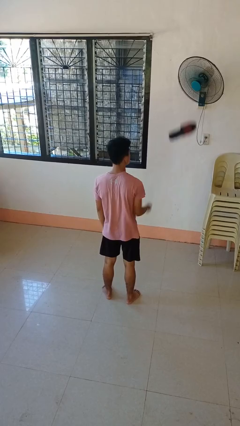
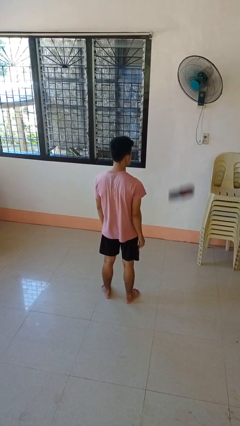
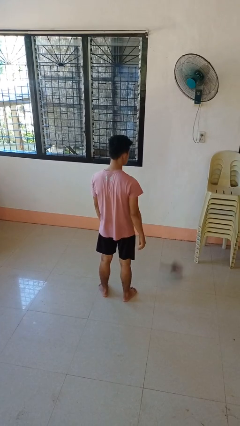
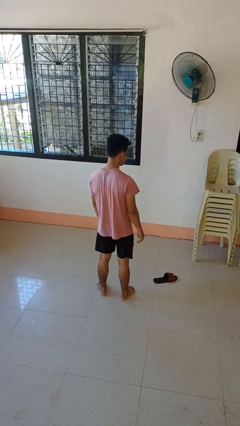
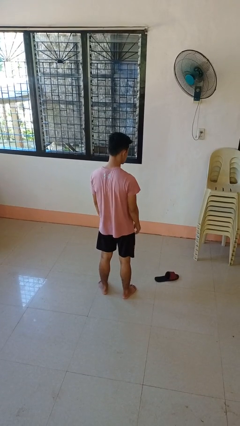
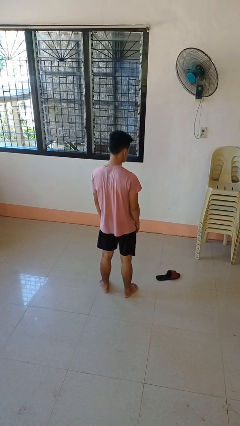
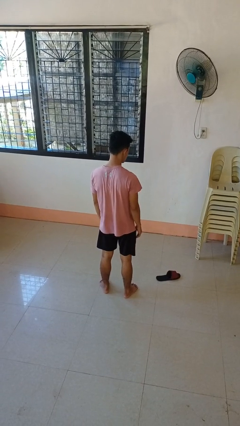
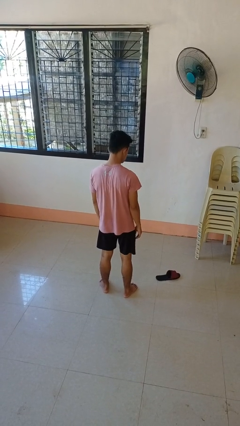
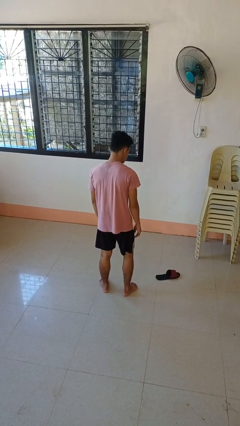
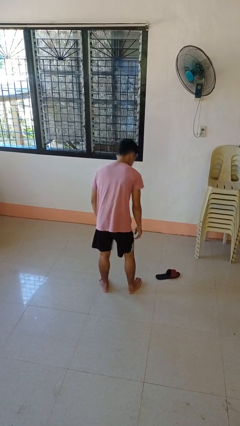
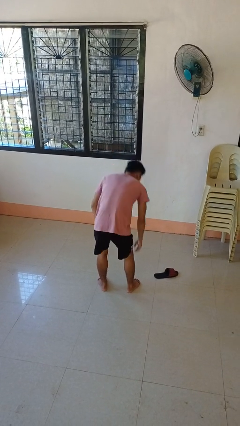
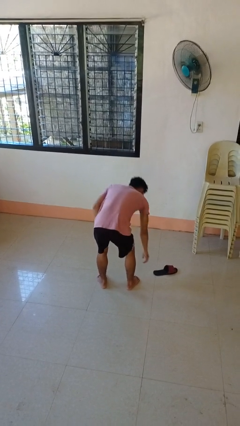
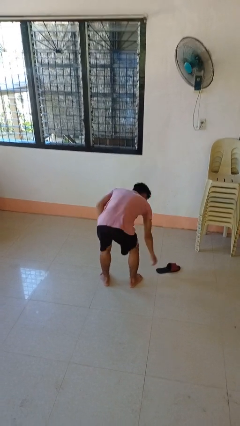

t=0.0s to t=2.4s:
person throws object into air

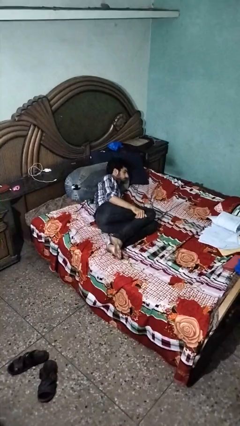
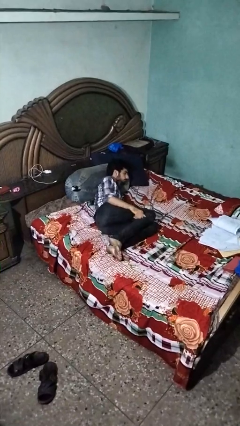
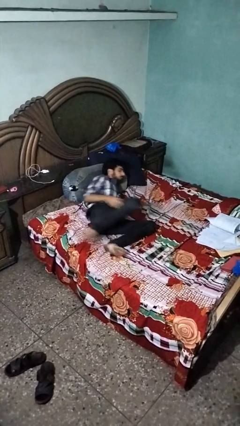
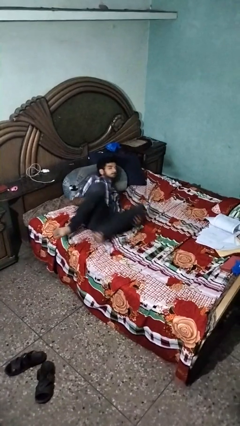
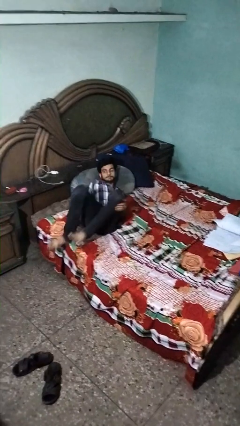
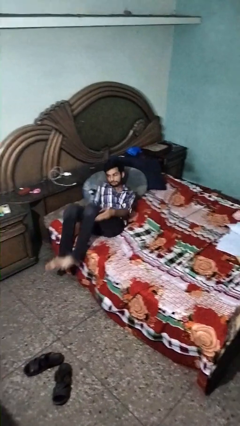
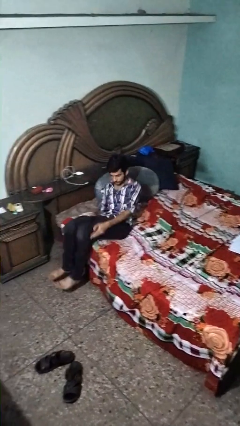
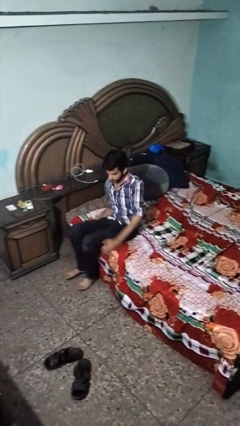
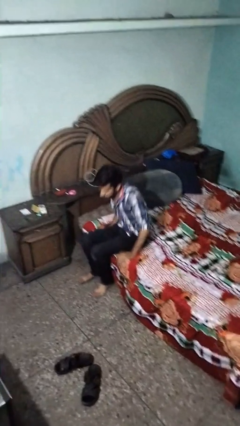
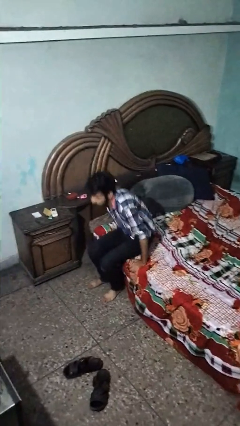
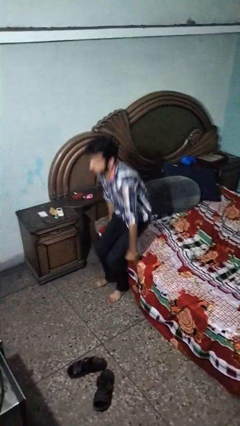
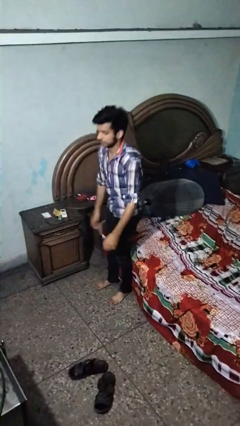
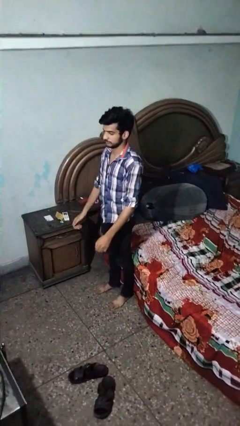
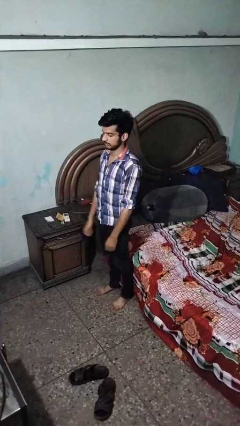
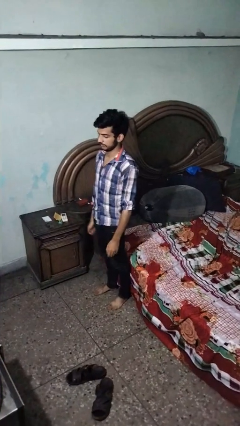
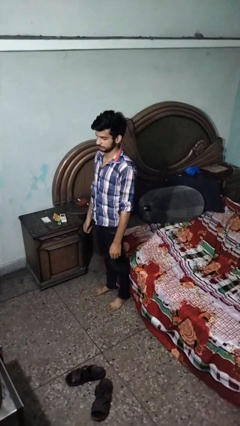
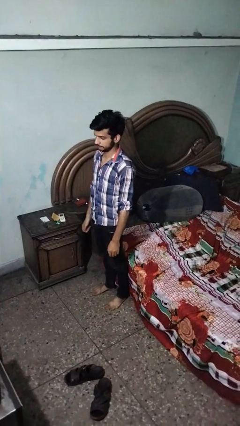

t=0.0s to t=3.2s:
person stands up

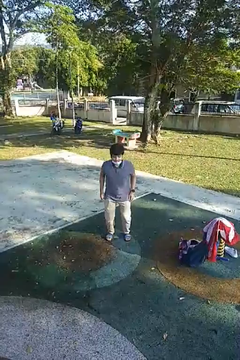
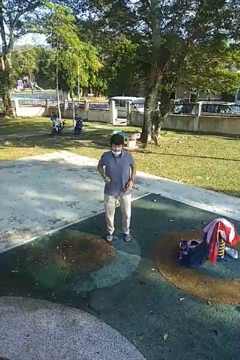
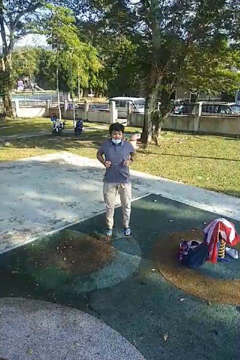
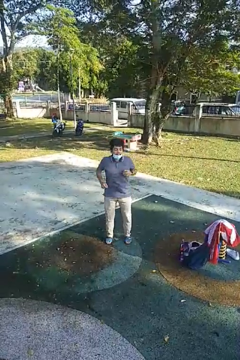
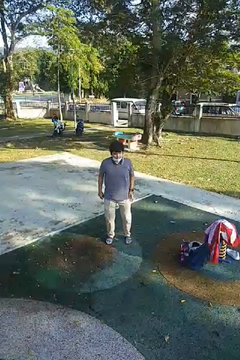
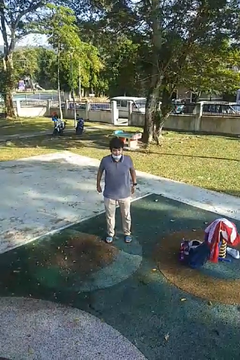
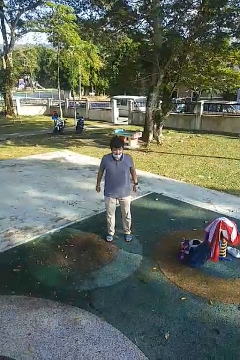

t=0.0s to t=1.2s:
person jumps

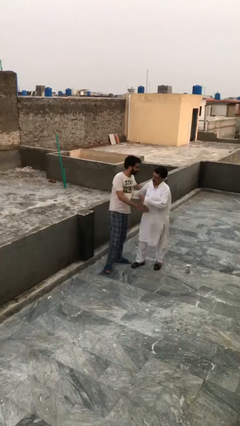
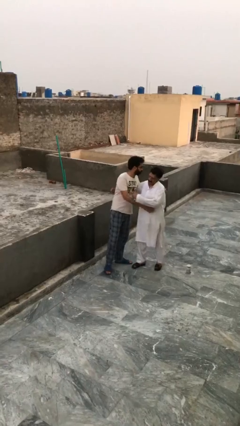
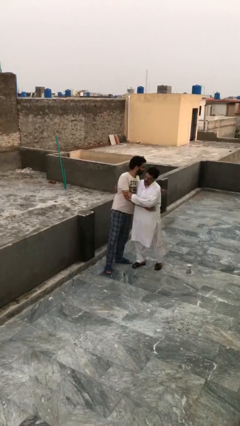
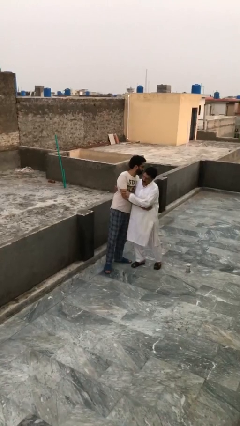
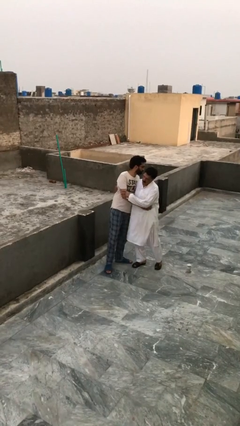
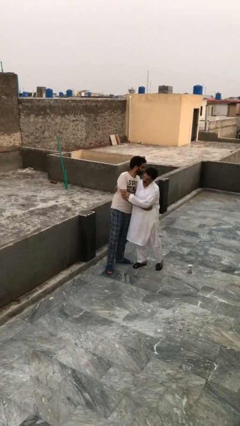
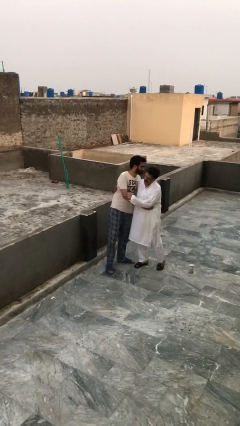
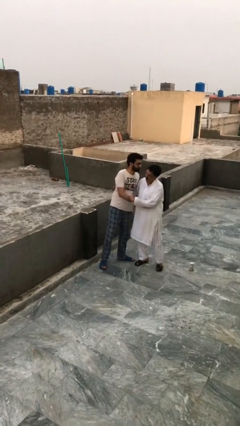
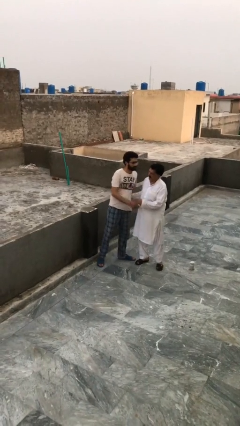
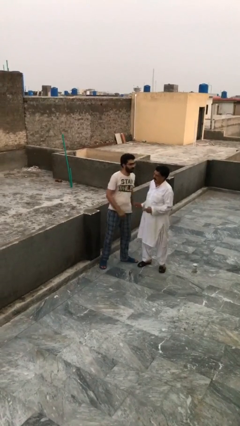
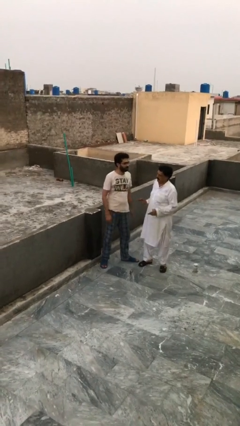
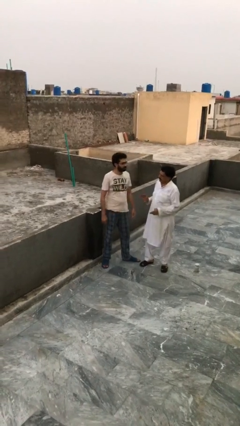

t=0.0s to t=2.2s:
person embraces person

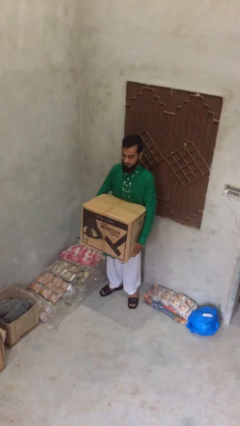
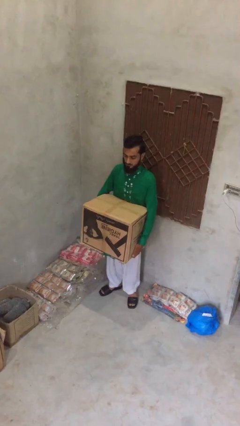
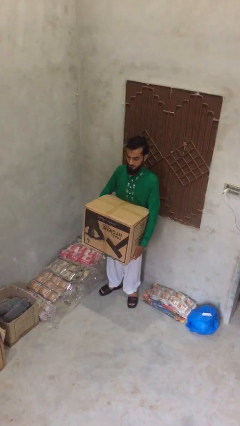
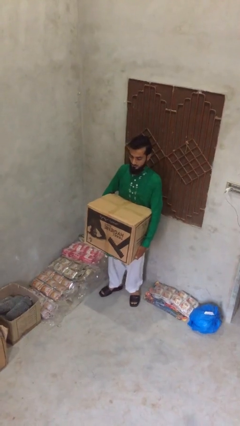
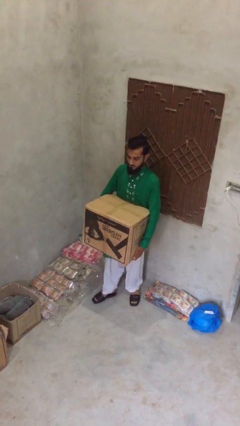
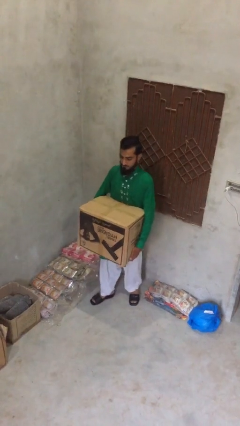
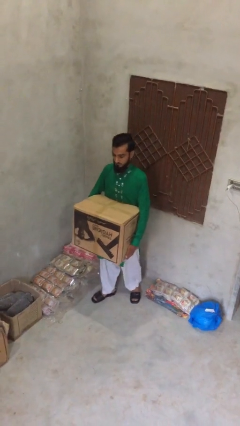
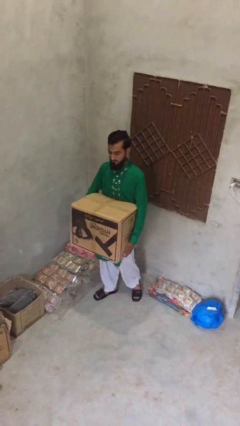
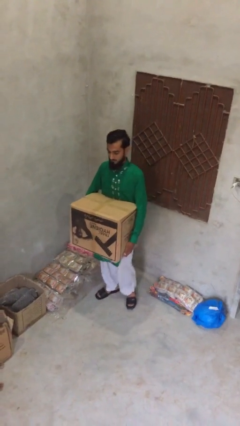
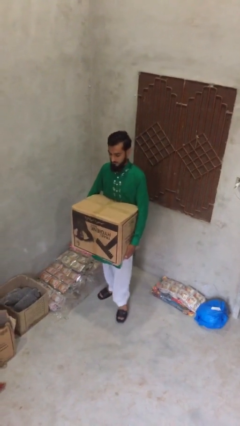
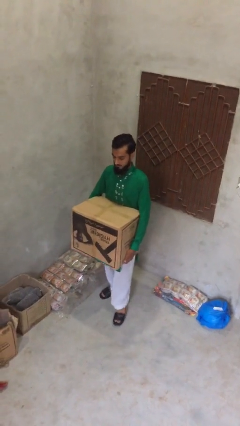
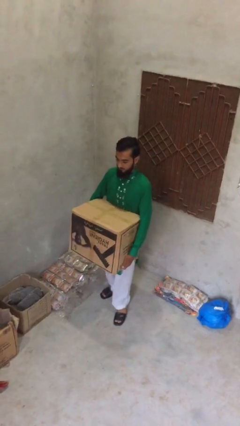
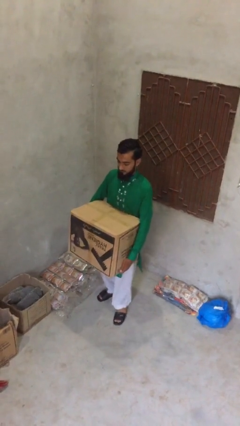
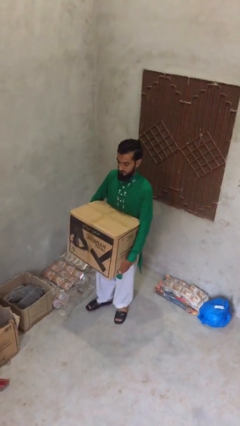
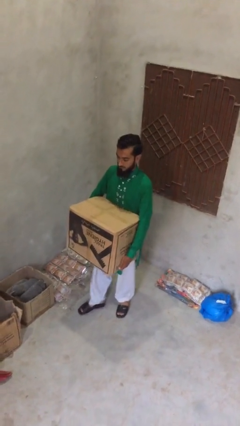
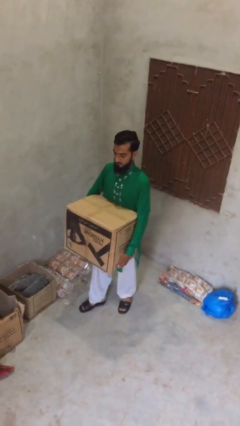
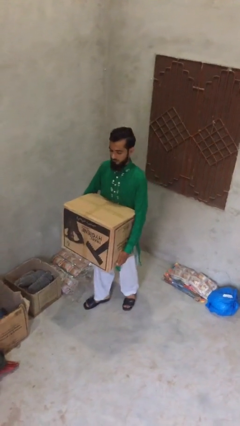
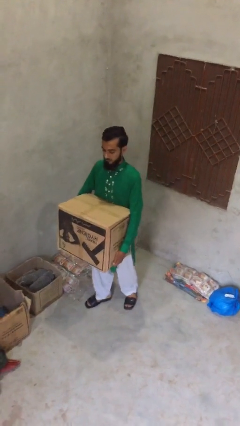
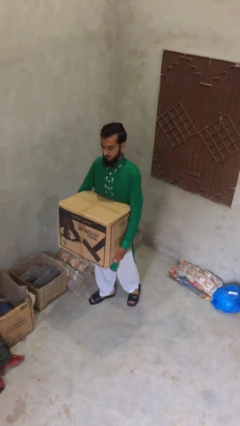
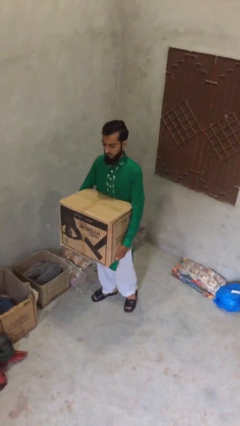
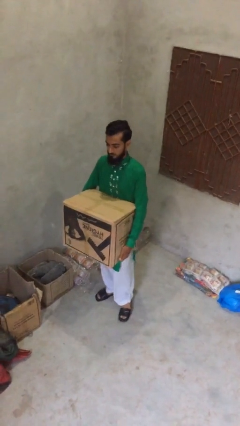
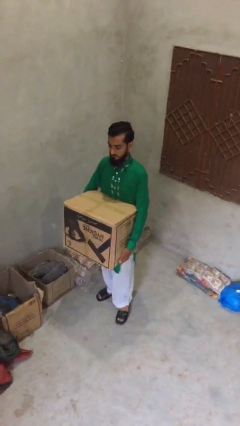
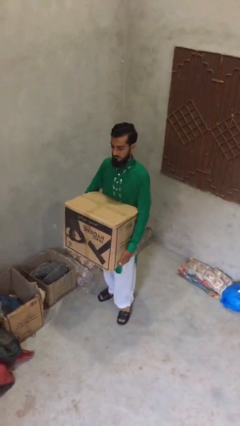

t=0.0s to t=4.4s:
person carries heavy object

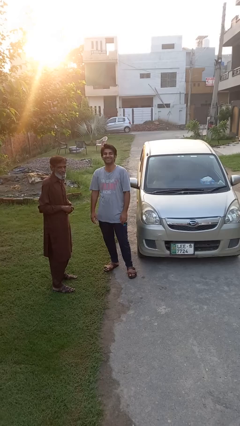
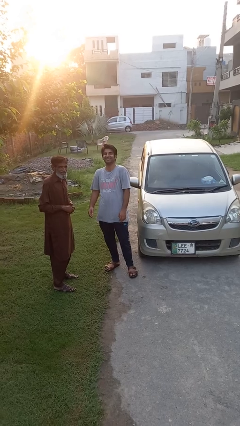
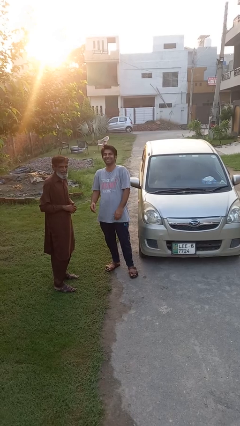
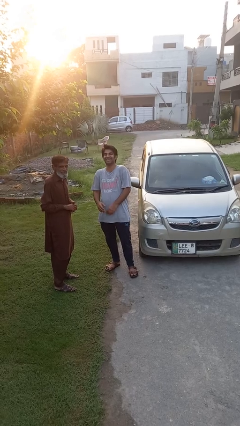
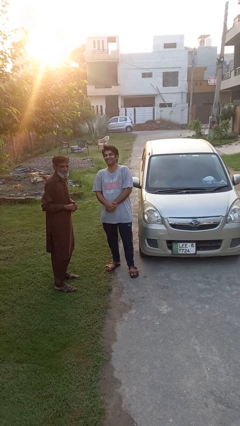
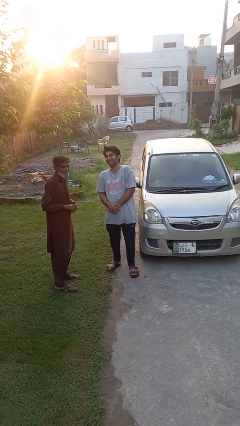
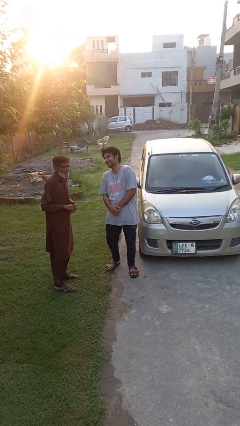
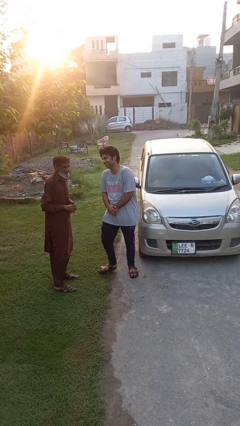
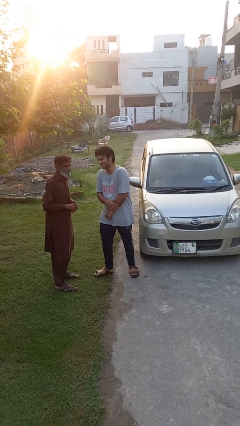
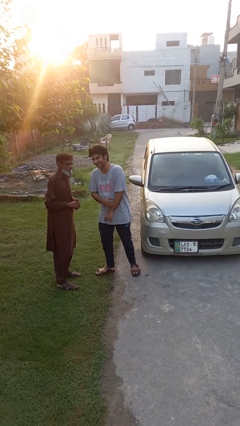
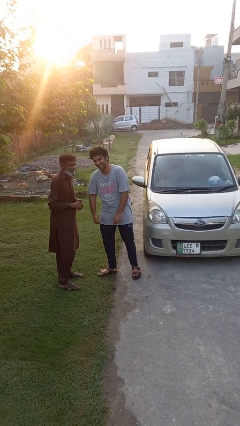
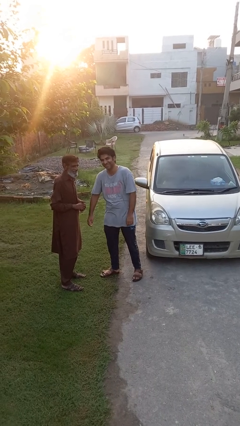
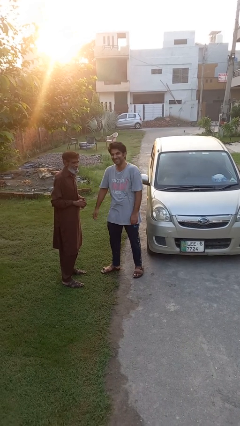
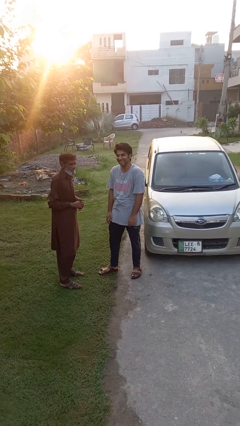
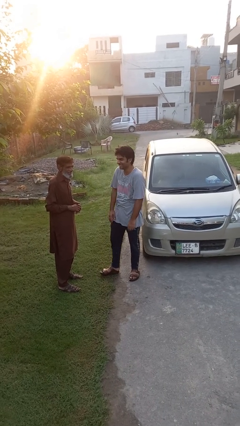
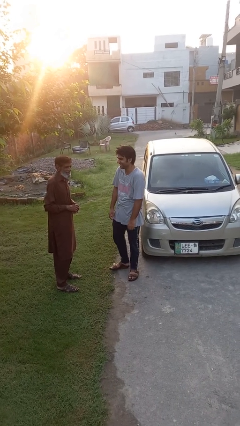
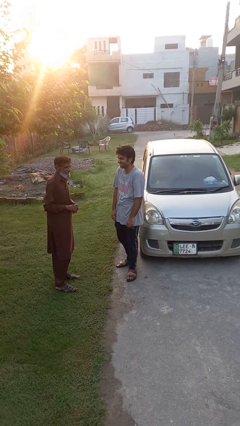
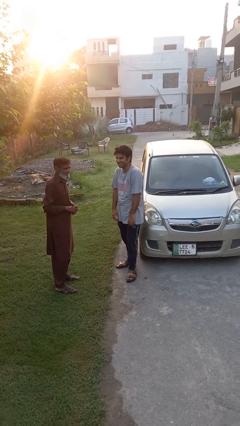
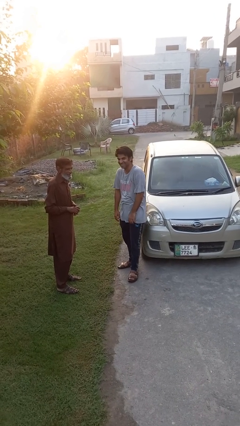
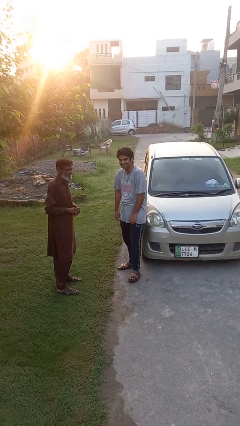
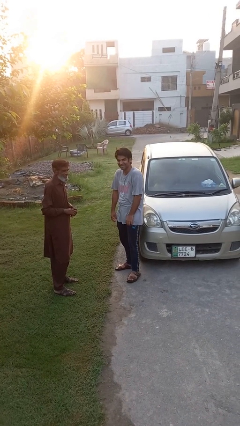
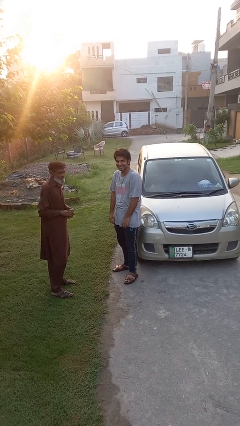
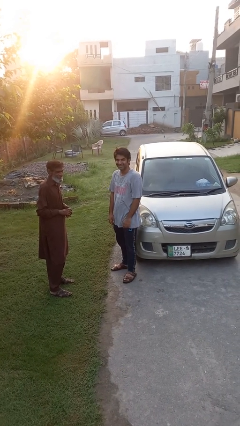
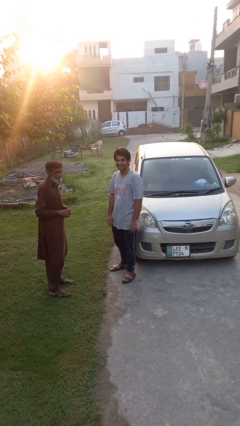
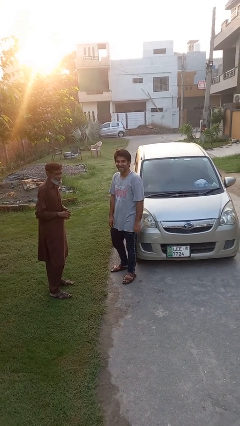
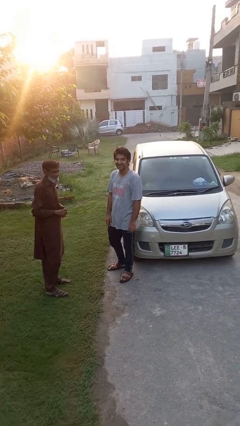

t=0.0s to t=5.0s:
person laughs with person
